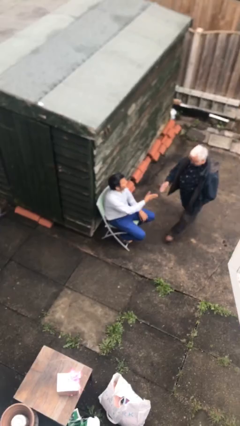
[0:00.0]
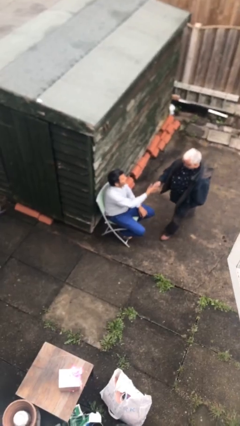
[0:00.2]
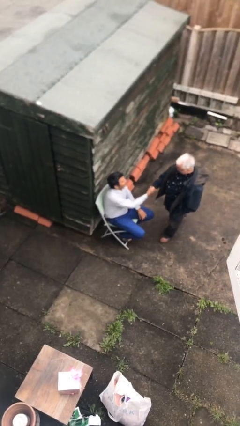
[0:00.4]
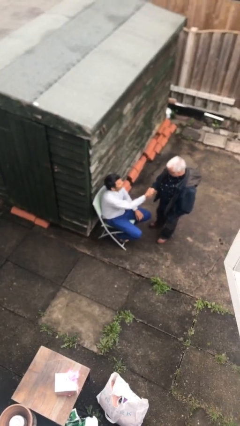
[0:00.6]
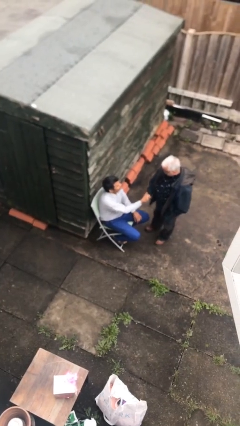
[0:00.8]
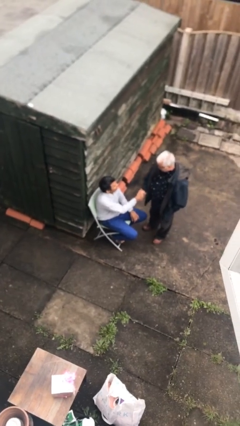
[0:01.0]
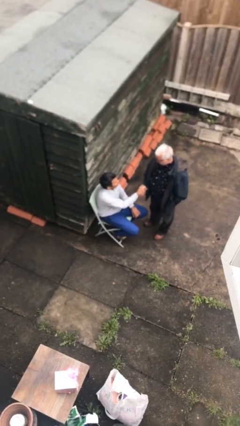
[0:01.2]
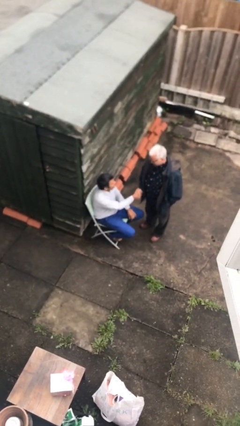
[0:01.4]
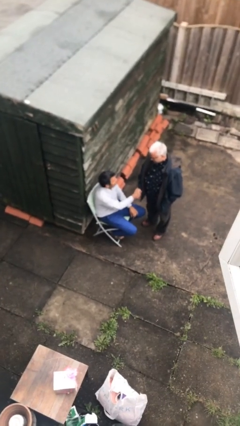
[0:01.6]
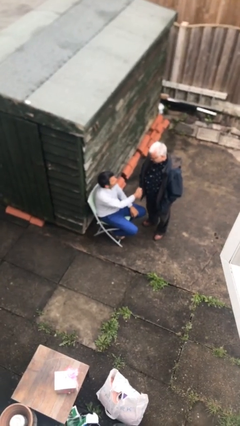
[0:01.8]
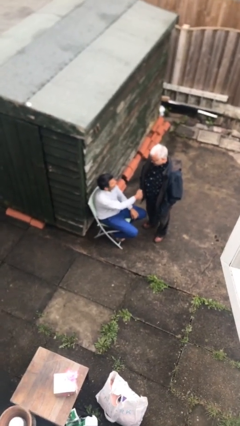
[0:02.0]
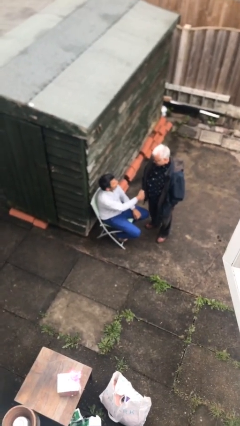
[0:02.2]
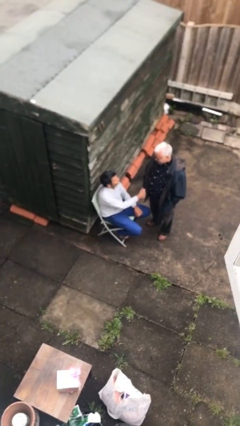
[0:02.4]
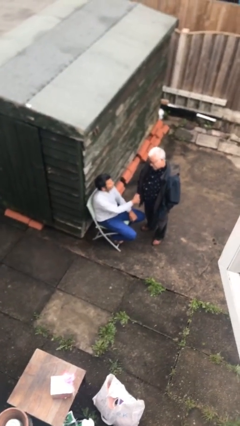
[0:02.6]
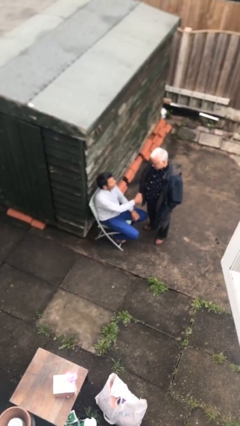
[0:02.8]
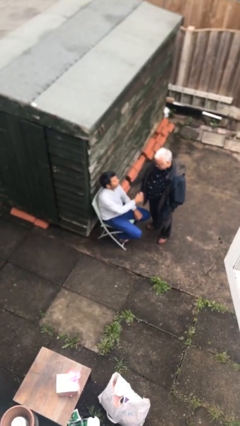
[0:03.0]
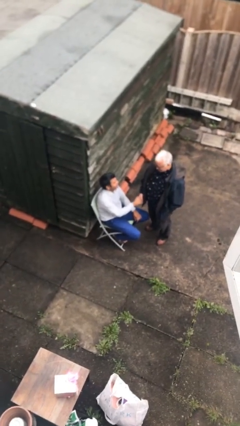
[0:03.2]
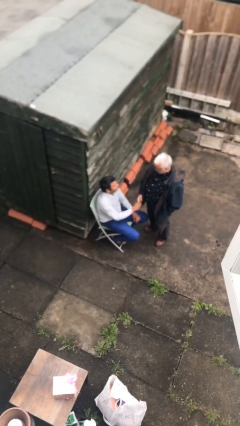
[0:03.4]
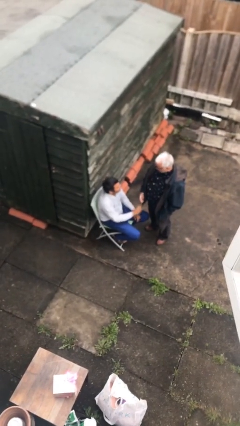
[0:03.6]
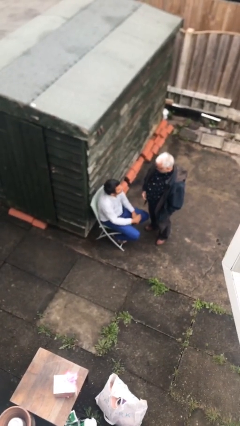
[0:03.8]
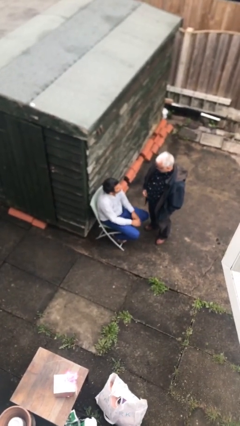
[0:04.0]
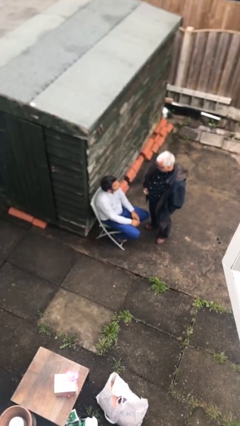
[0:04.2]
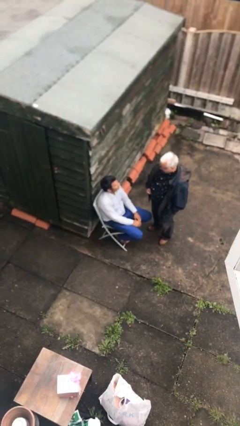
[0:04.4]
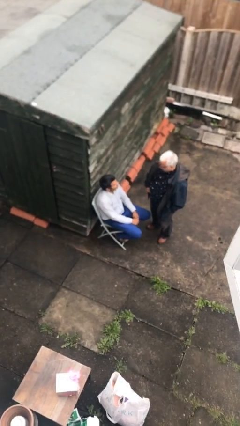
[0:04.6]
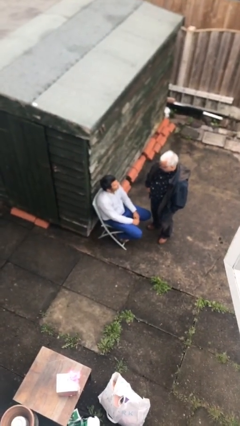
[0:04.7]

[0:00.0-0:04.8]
person shakes hand

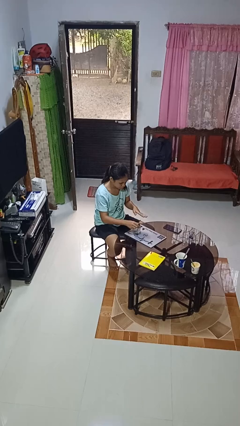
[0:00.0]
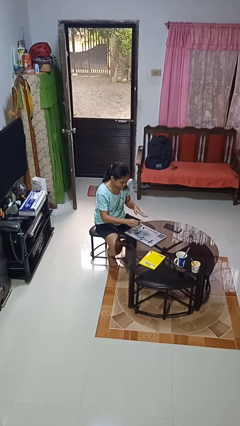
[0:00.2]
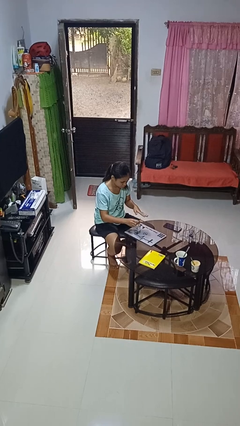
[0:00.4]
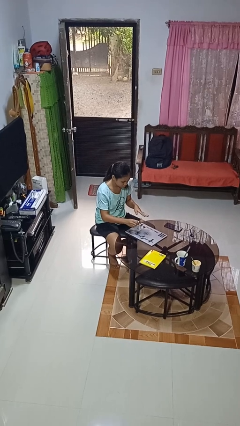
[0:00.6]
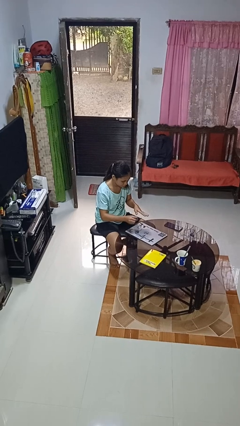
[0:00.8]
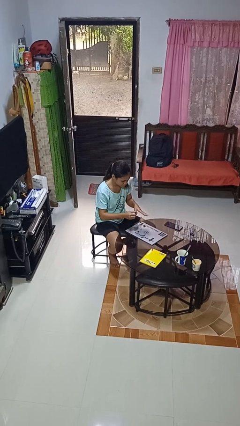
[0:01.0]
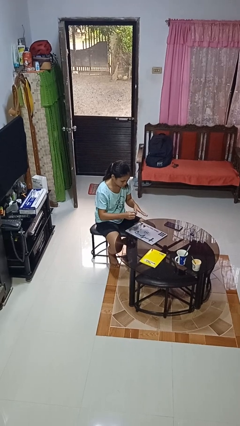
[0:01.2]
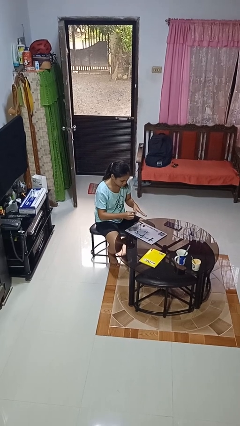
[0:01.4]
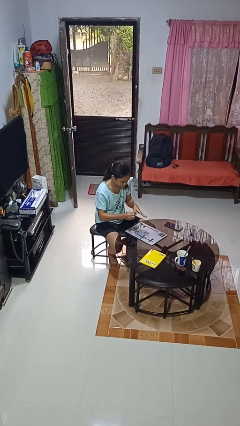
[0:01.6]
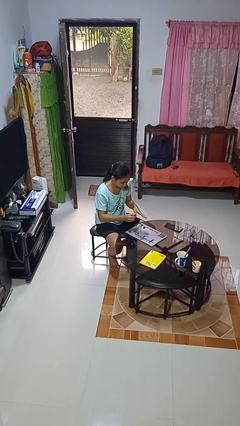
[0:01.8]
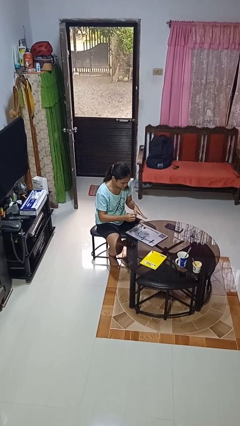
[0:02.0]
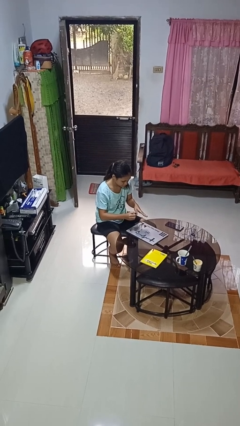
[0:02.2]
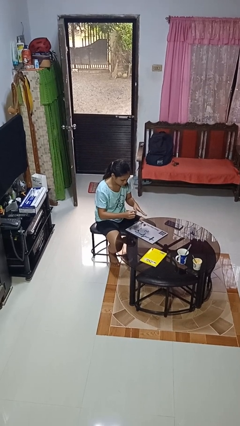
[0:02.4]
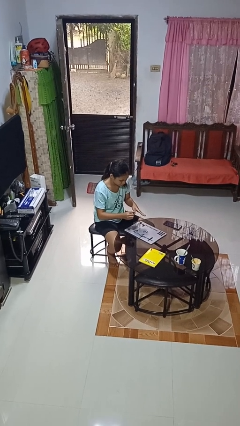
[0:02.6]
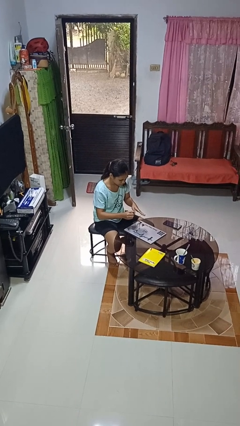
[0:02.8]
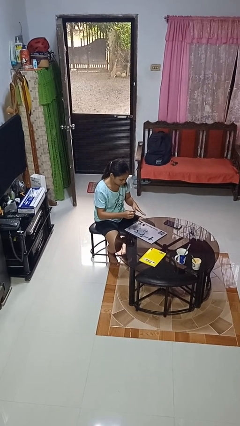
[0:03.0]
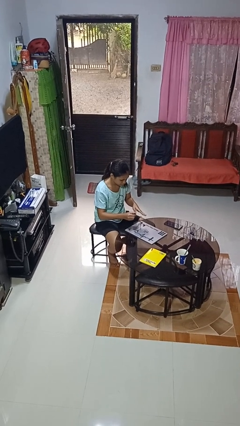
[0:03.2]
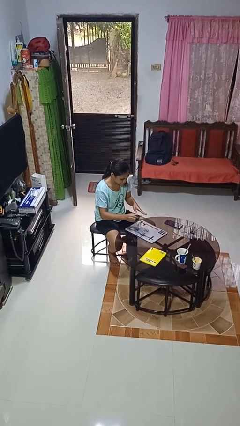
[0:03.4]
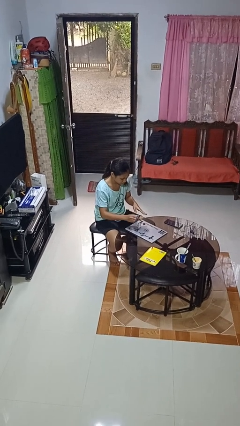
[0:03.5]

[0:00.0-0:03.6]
person paints fingernails

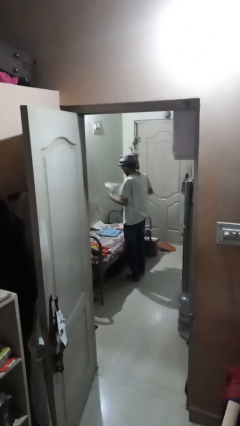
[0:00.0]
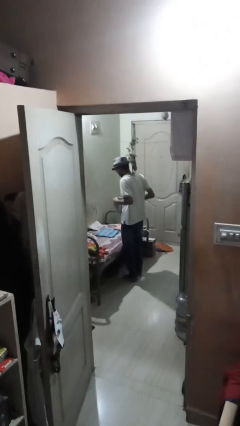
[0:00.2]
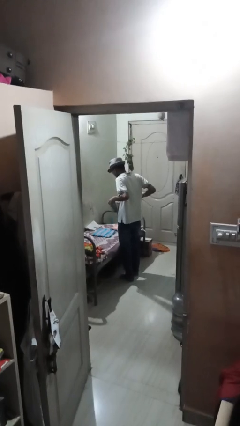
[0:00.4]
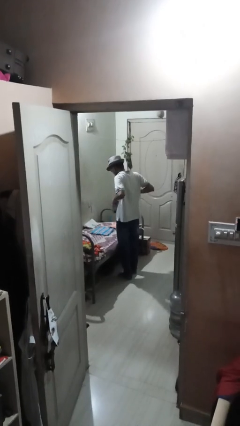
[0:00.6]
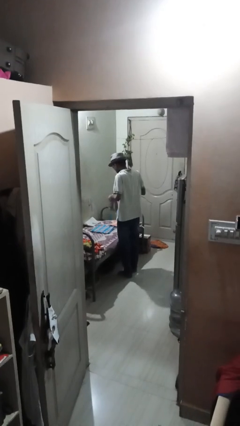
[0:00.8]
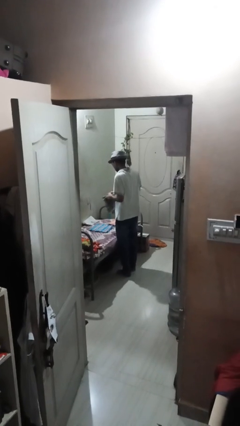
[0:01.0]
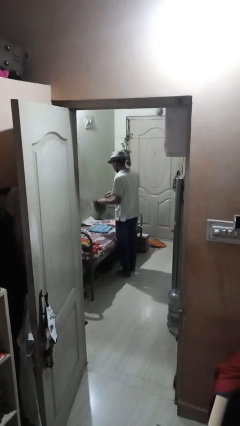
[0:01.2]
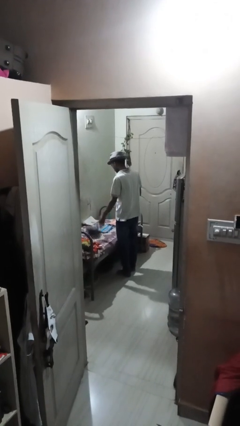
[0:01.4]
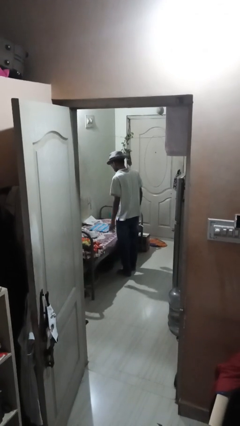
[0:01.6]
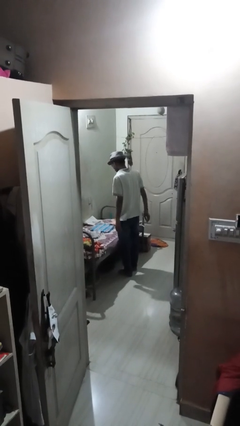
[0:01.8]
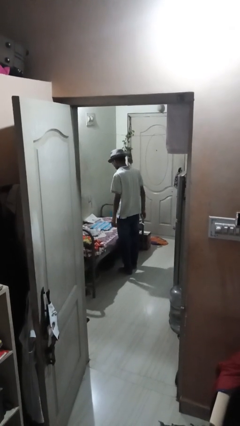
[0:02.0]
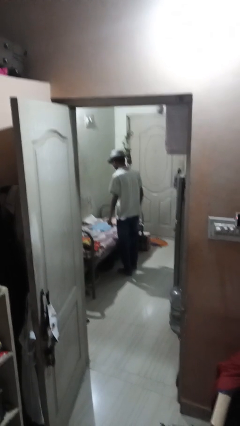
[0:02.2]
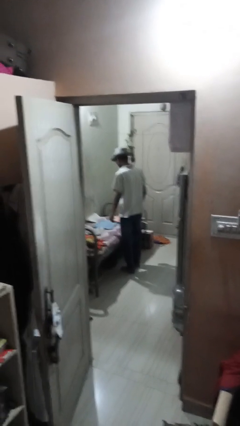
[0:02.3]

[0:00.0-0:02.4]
person folds towel

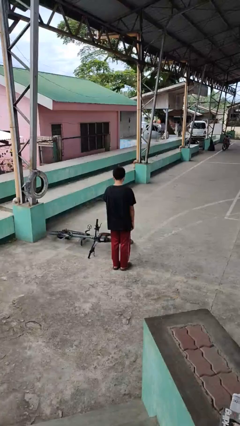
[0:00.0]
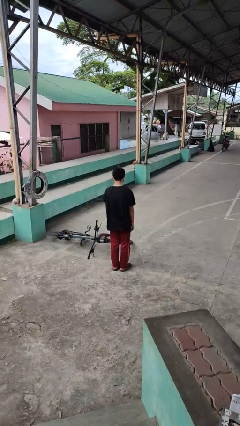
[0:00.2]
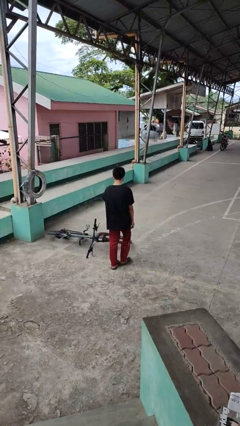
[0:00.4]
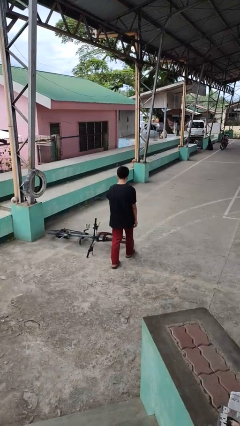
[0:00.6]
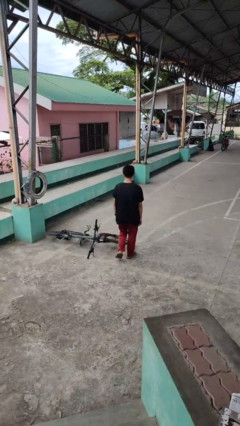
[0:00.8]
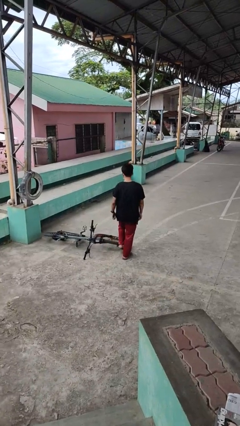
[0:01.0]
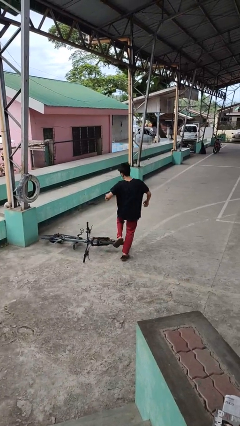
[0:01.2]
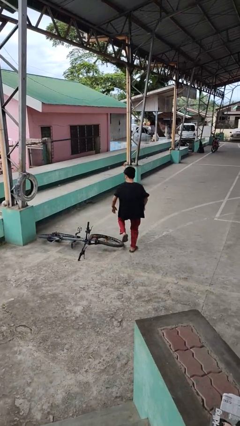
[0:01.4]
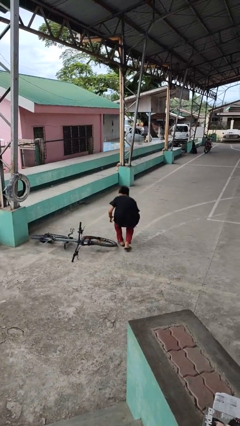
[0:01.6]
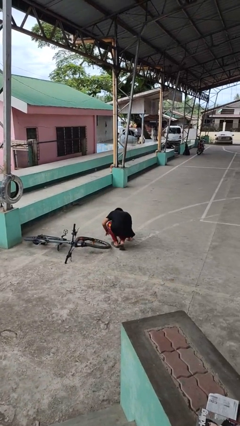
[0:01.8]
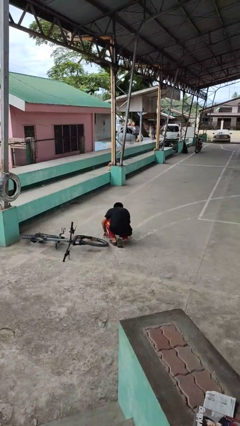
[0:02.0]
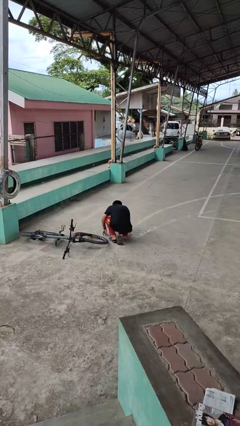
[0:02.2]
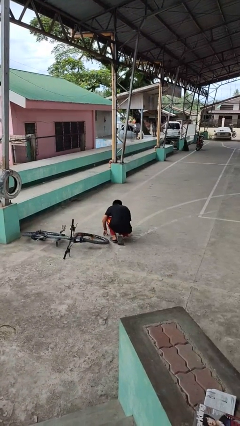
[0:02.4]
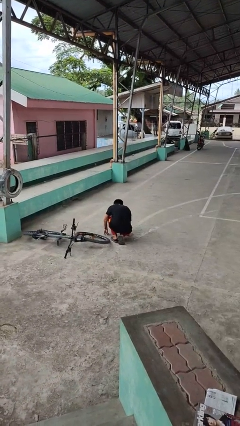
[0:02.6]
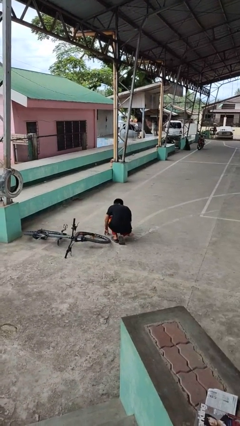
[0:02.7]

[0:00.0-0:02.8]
person trips on object on floor

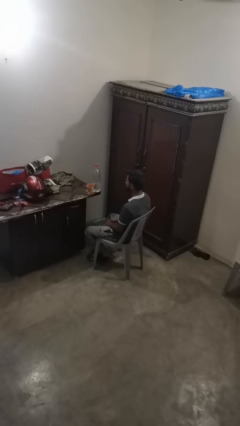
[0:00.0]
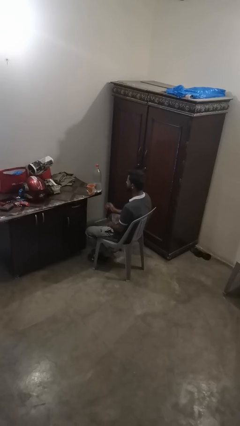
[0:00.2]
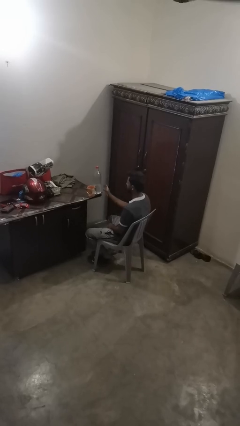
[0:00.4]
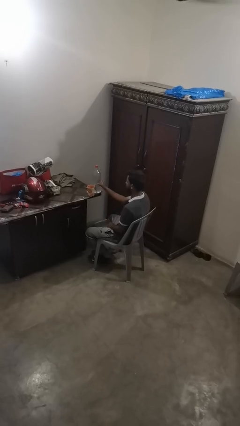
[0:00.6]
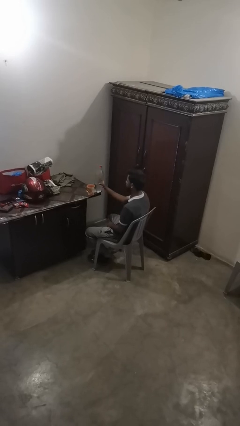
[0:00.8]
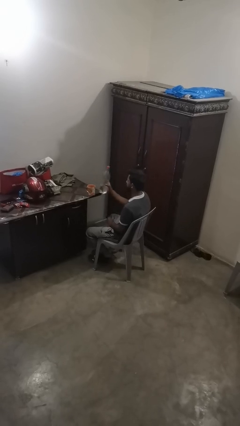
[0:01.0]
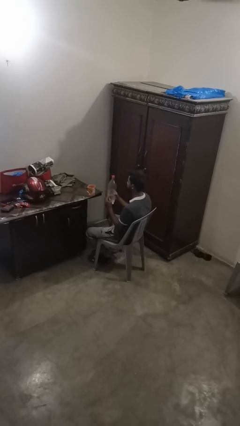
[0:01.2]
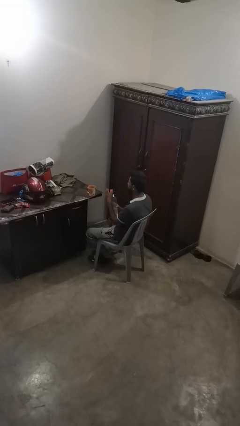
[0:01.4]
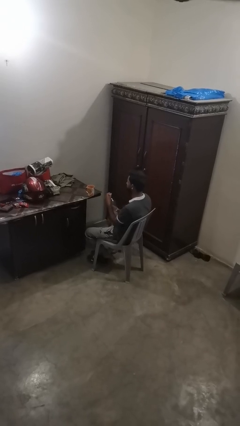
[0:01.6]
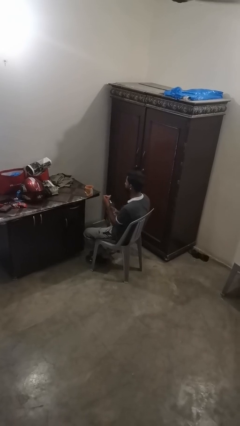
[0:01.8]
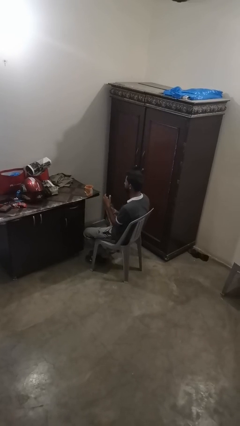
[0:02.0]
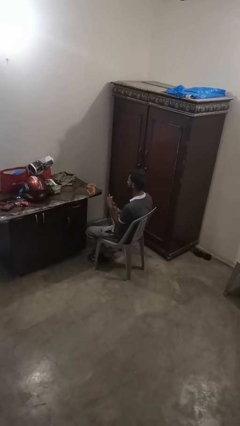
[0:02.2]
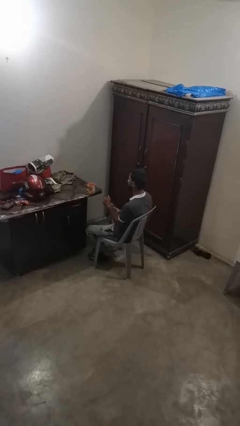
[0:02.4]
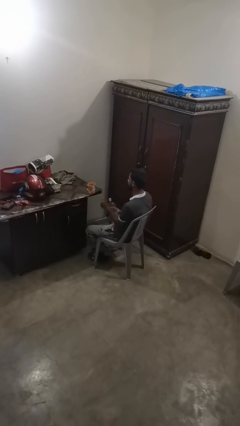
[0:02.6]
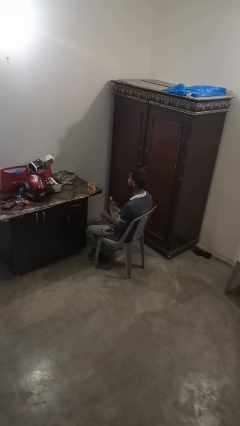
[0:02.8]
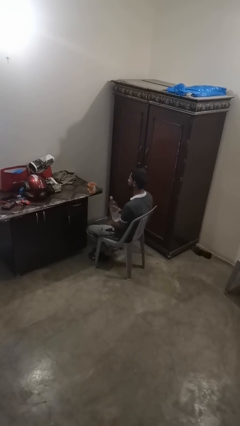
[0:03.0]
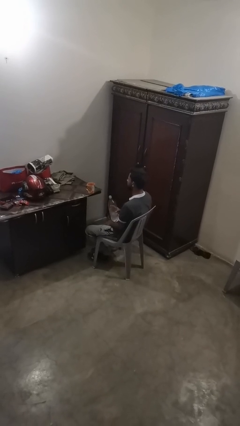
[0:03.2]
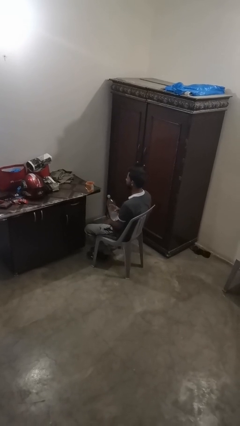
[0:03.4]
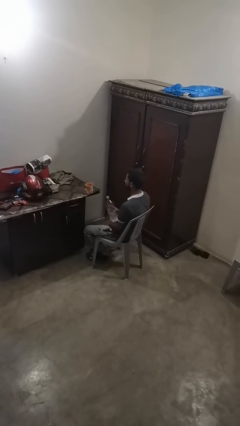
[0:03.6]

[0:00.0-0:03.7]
person unscrews lid from bottle

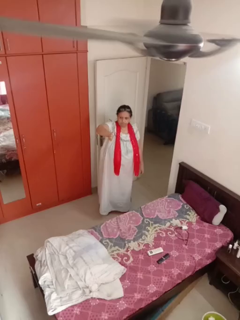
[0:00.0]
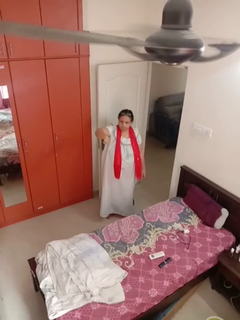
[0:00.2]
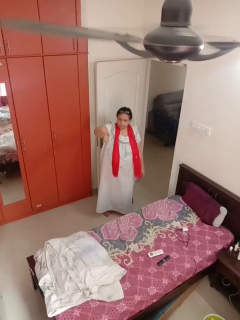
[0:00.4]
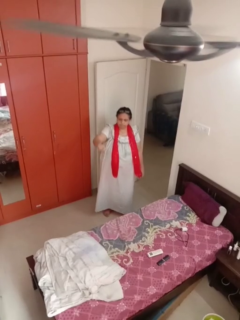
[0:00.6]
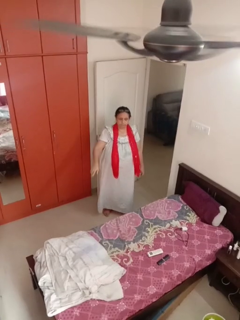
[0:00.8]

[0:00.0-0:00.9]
person gestures swipe right
